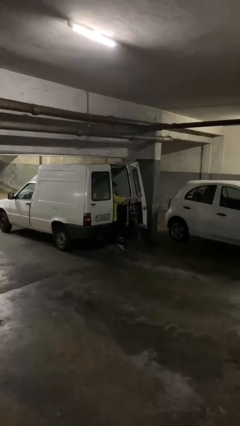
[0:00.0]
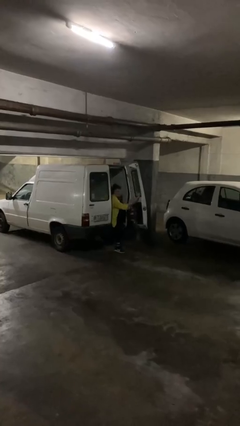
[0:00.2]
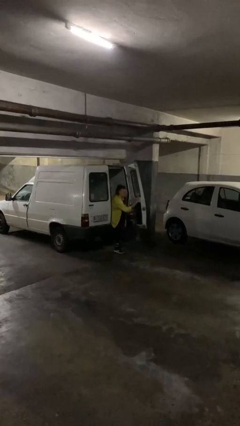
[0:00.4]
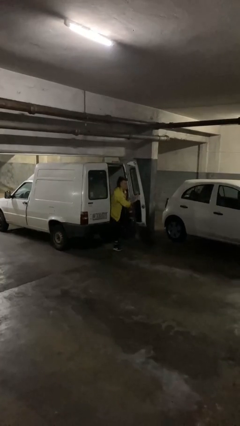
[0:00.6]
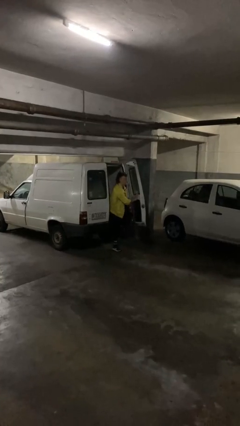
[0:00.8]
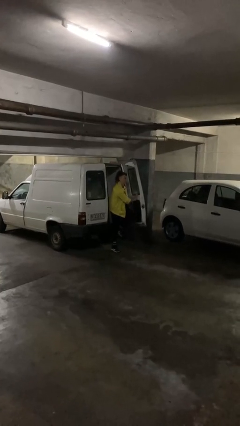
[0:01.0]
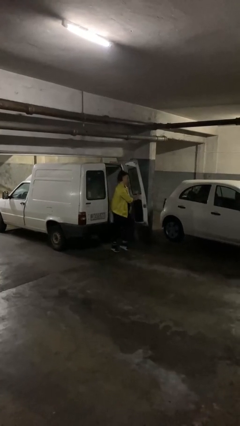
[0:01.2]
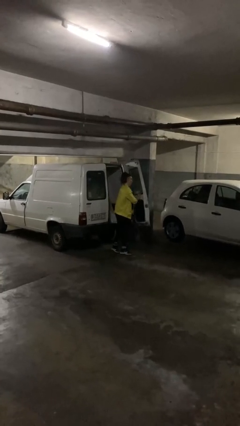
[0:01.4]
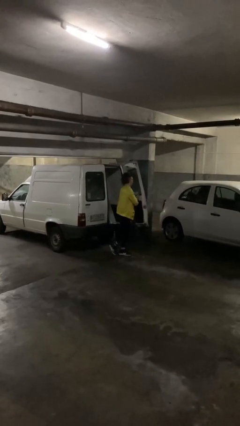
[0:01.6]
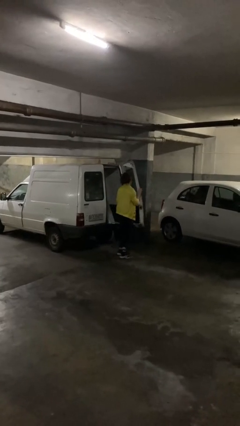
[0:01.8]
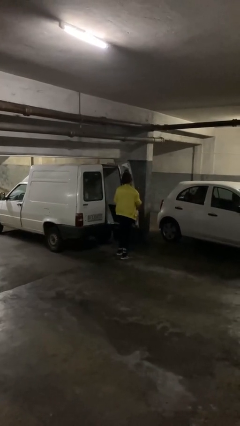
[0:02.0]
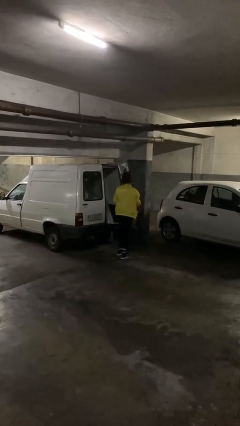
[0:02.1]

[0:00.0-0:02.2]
person exits car

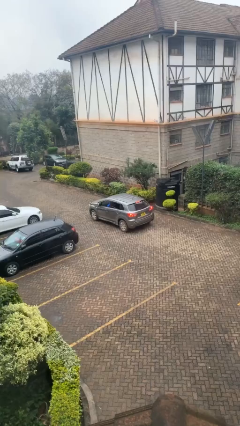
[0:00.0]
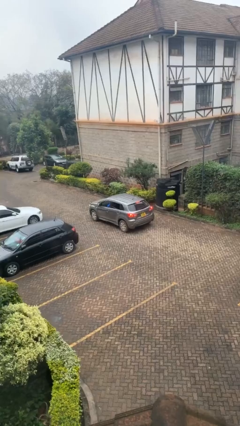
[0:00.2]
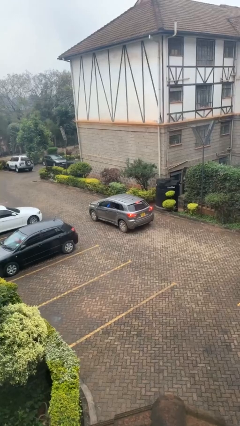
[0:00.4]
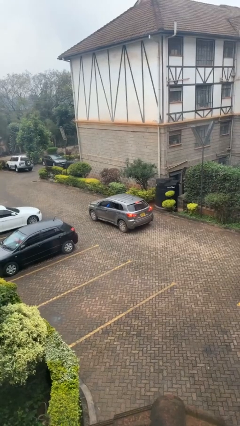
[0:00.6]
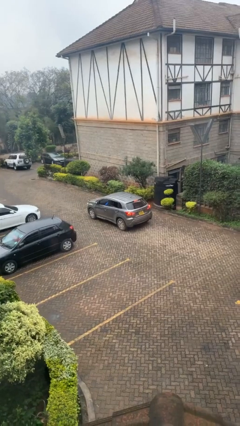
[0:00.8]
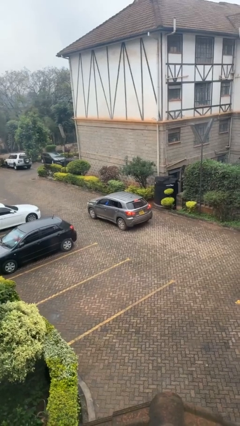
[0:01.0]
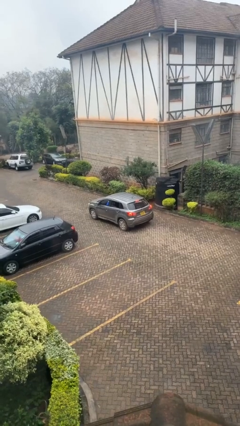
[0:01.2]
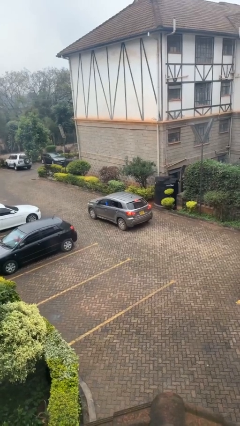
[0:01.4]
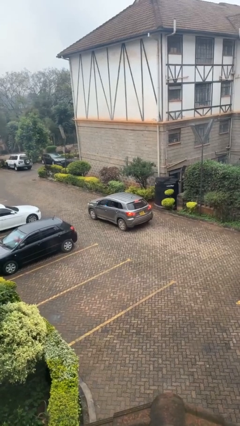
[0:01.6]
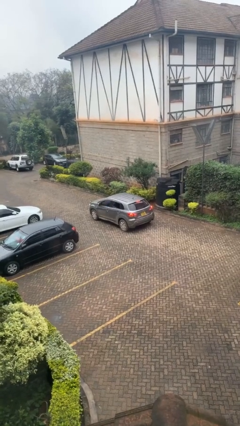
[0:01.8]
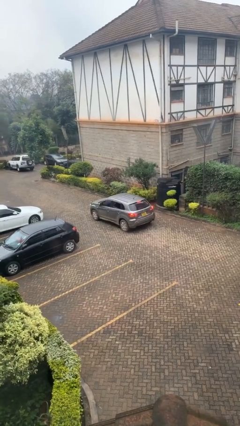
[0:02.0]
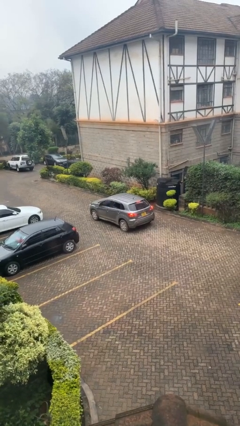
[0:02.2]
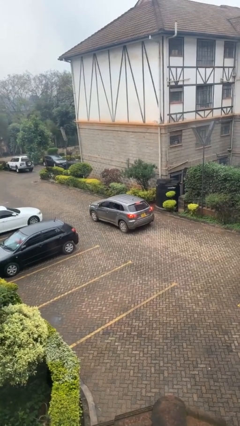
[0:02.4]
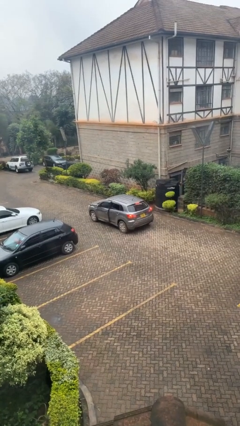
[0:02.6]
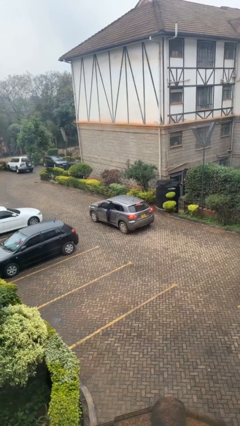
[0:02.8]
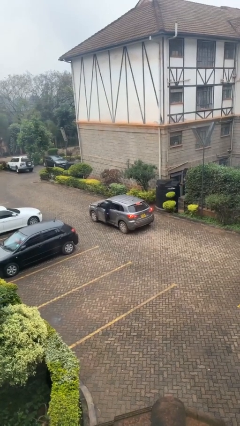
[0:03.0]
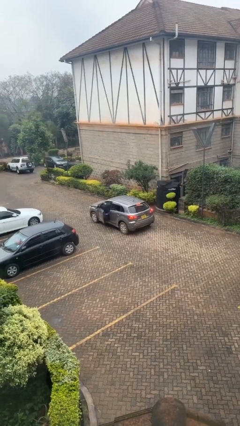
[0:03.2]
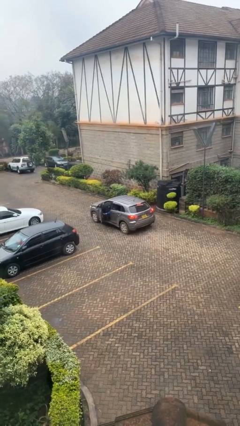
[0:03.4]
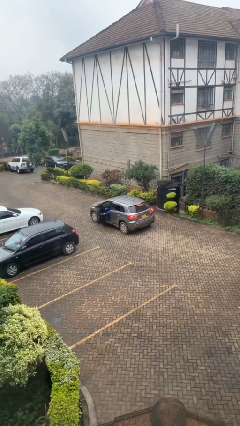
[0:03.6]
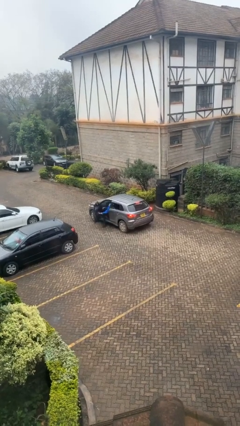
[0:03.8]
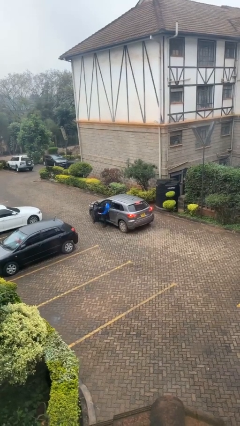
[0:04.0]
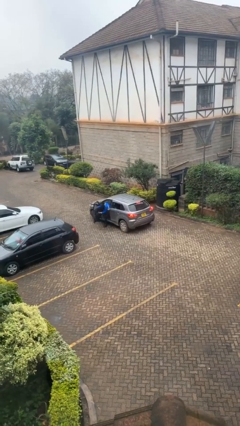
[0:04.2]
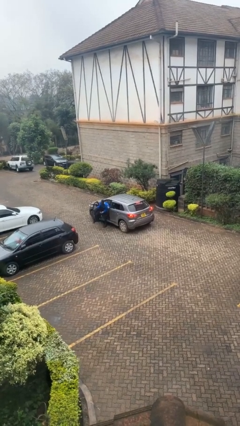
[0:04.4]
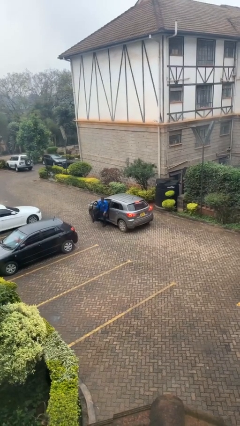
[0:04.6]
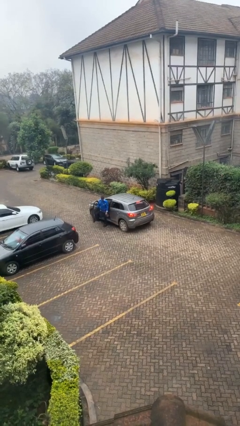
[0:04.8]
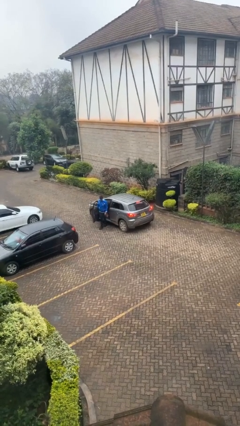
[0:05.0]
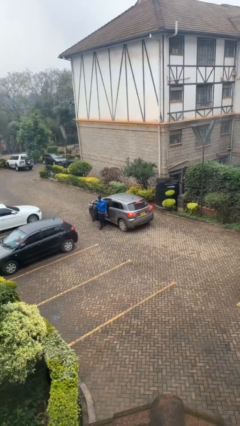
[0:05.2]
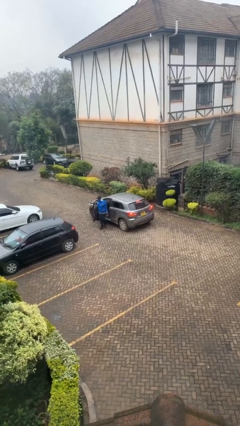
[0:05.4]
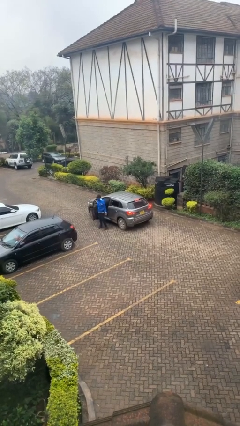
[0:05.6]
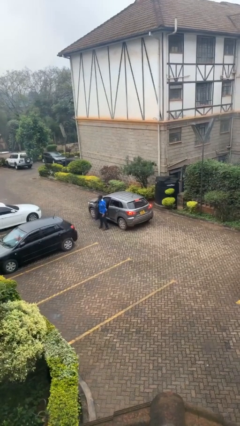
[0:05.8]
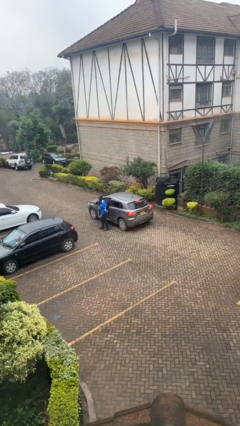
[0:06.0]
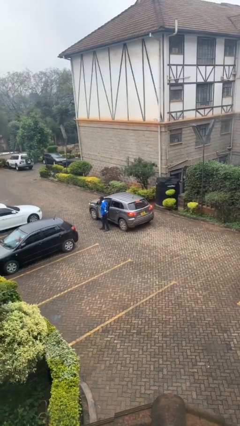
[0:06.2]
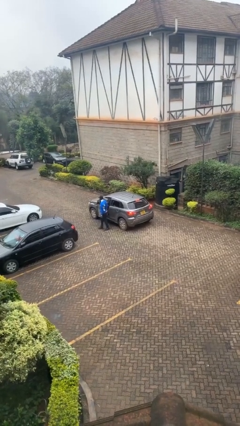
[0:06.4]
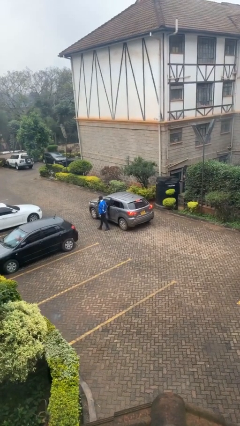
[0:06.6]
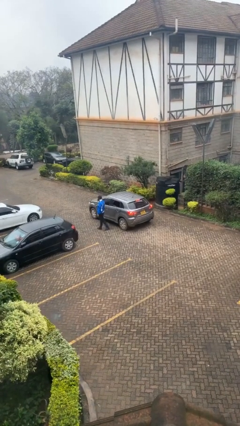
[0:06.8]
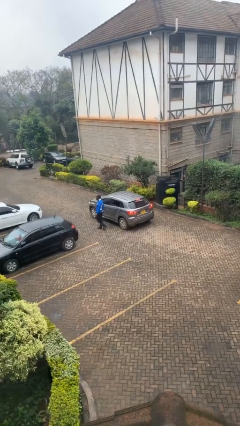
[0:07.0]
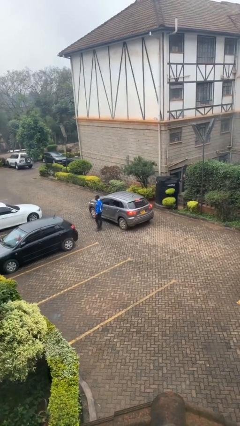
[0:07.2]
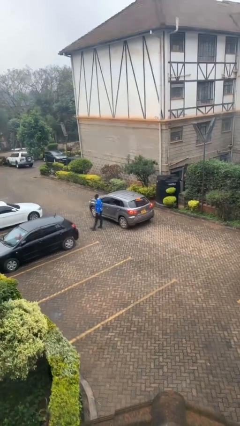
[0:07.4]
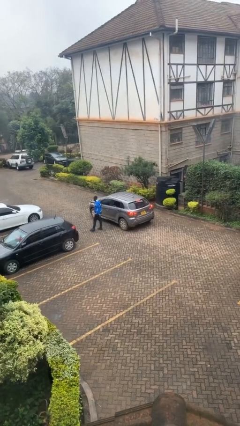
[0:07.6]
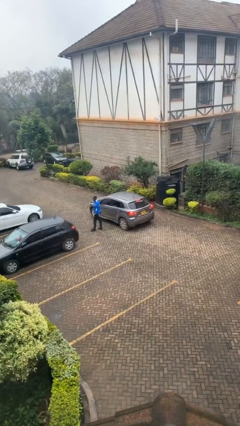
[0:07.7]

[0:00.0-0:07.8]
car drops off person

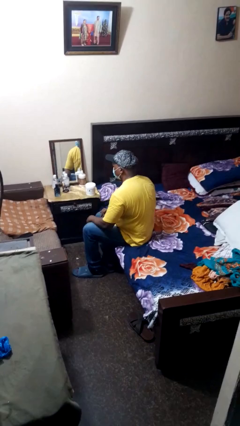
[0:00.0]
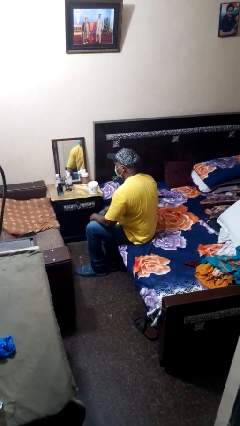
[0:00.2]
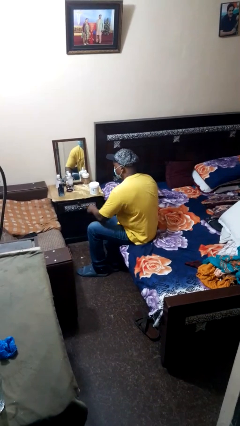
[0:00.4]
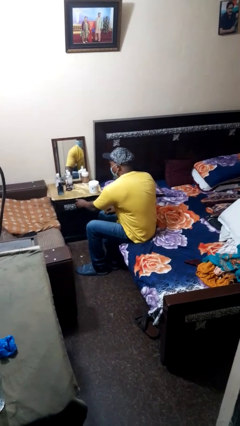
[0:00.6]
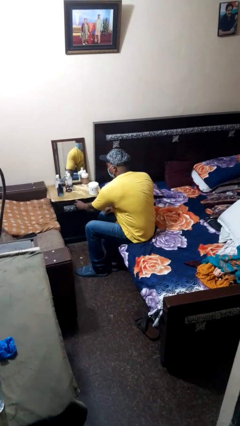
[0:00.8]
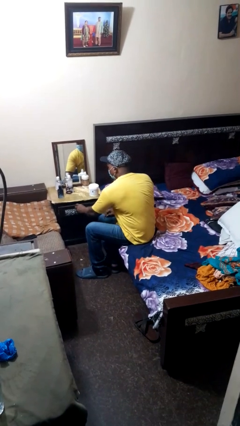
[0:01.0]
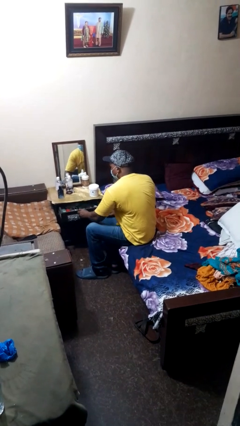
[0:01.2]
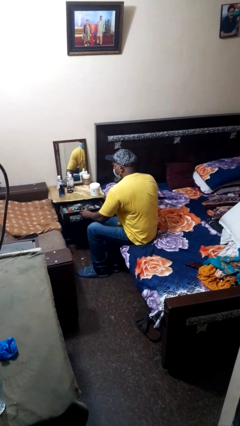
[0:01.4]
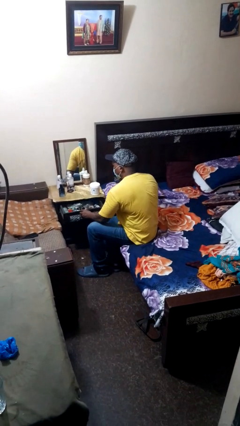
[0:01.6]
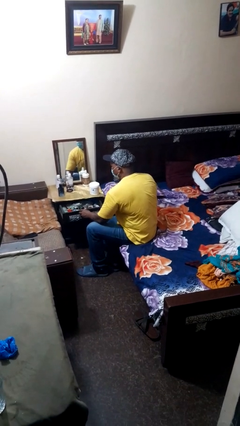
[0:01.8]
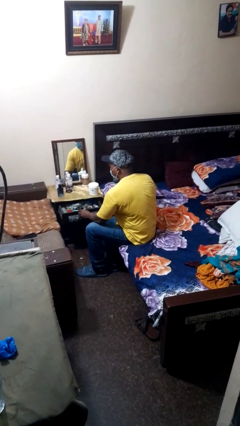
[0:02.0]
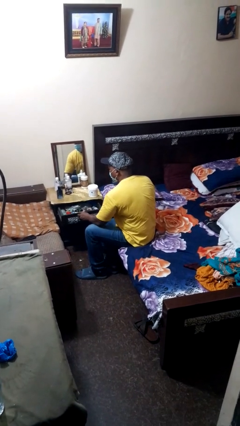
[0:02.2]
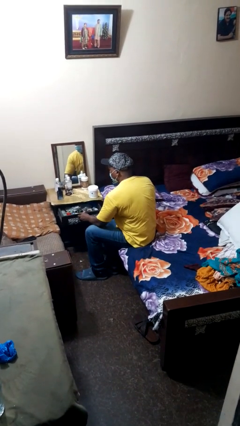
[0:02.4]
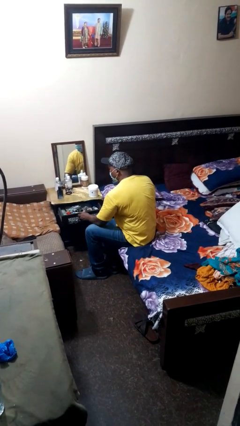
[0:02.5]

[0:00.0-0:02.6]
person opens dresser drawer

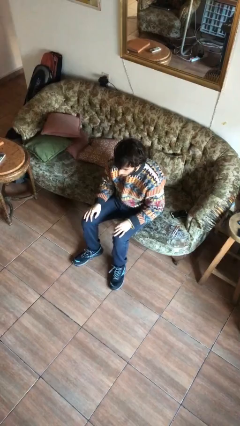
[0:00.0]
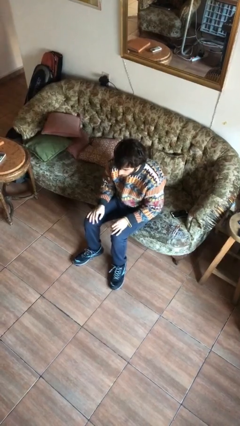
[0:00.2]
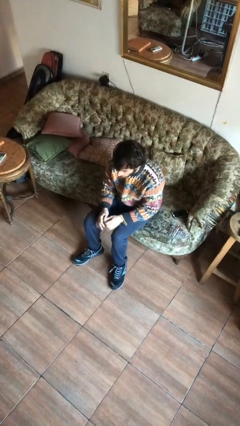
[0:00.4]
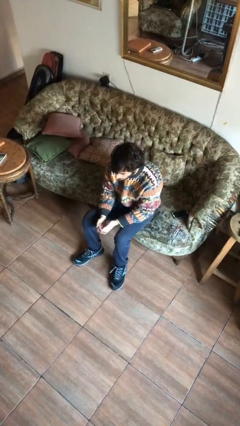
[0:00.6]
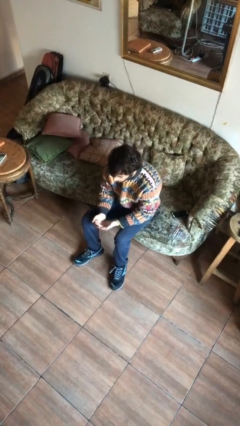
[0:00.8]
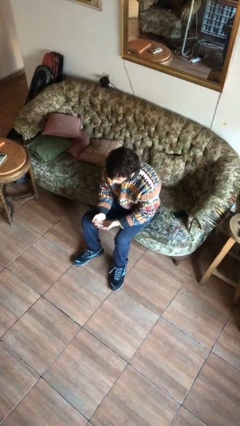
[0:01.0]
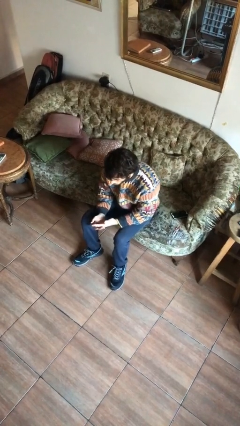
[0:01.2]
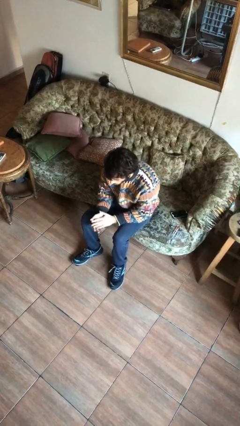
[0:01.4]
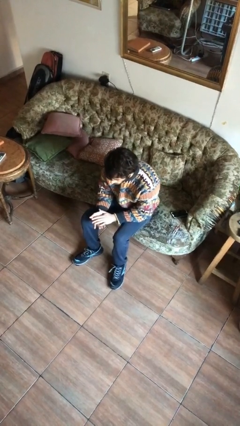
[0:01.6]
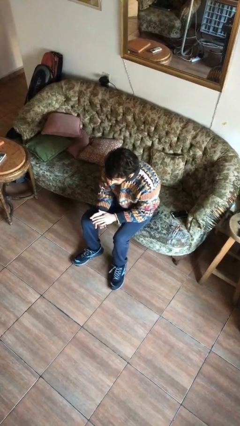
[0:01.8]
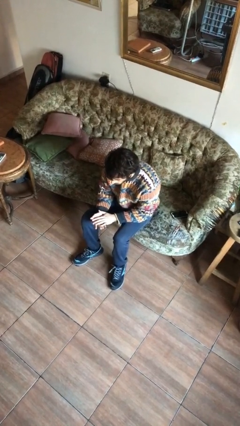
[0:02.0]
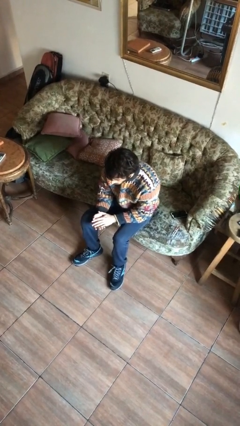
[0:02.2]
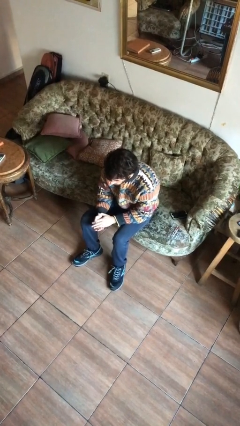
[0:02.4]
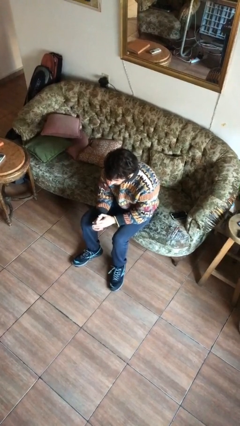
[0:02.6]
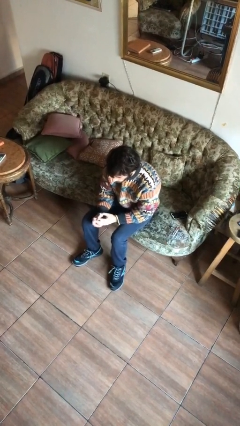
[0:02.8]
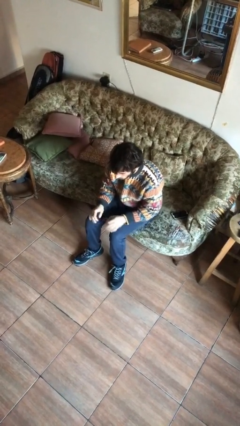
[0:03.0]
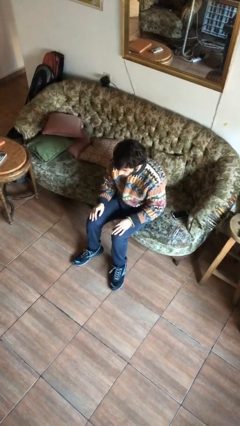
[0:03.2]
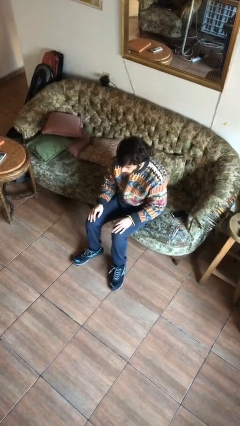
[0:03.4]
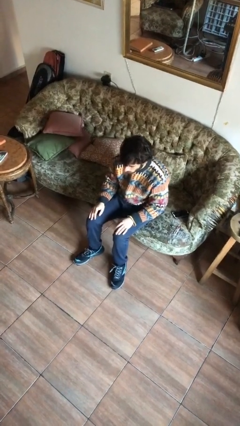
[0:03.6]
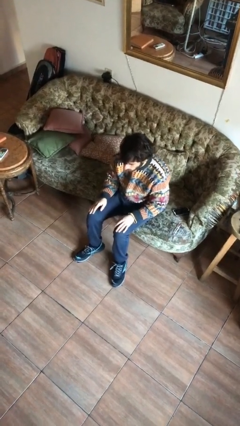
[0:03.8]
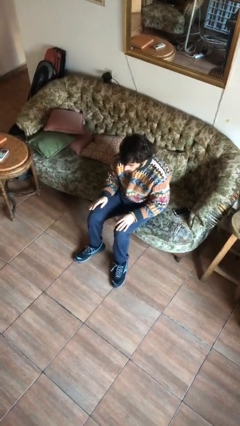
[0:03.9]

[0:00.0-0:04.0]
person looks at hands in lap

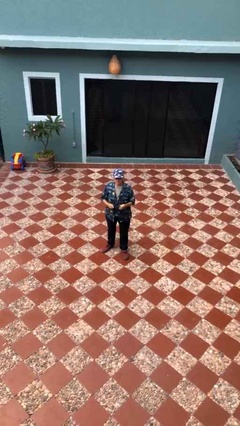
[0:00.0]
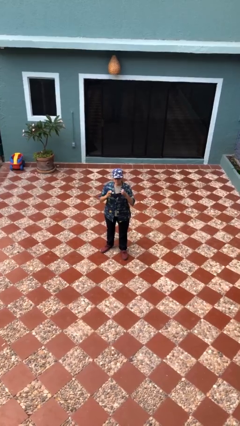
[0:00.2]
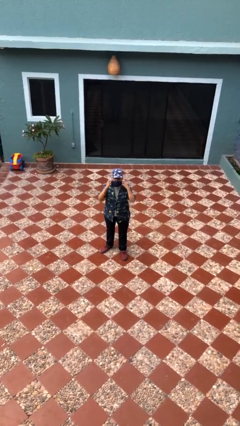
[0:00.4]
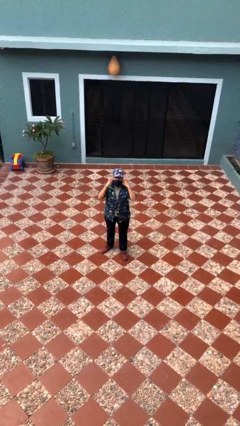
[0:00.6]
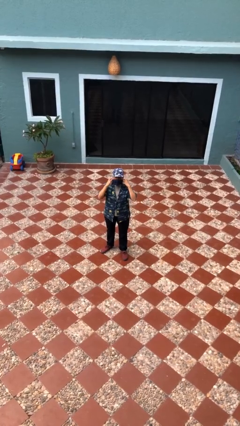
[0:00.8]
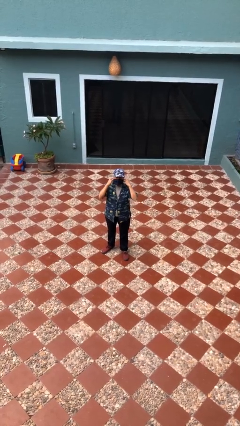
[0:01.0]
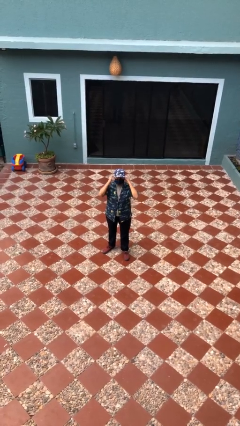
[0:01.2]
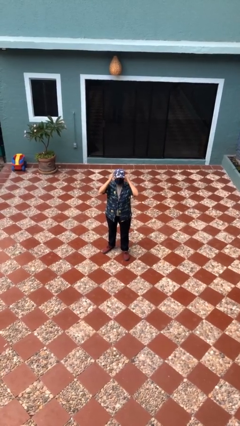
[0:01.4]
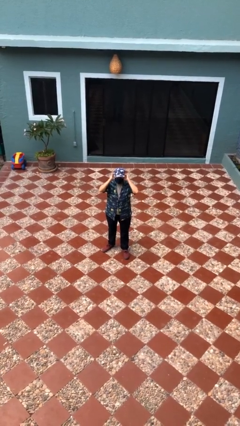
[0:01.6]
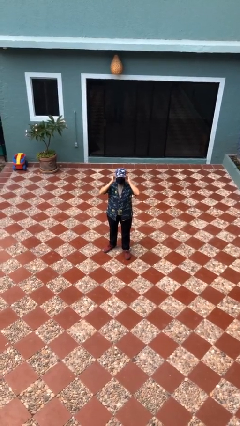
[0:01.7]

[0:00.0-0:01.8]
person puts on facemask
